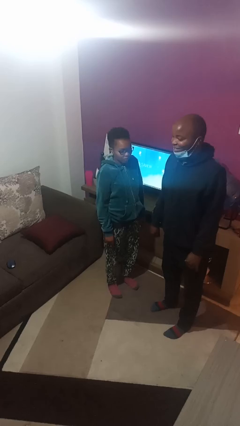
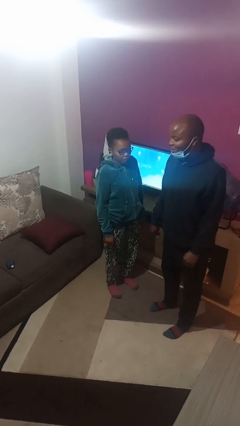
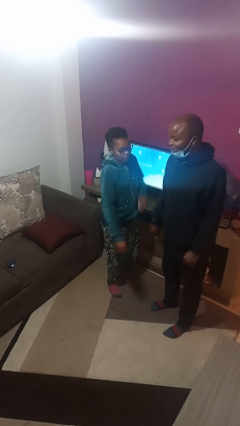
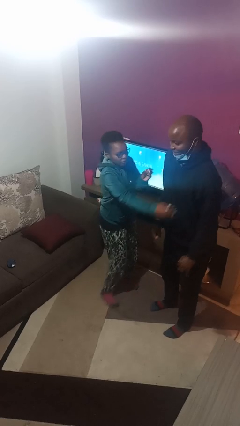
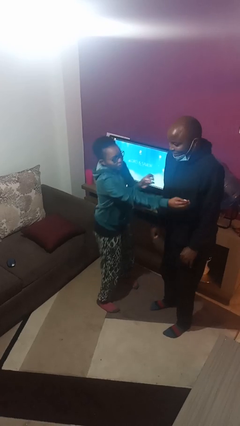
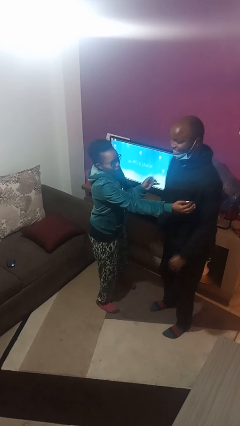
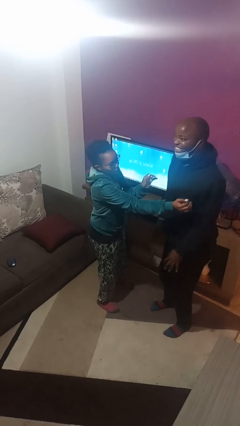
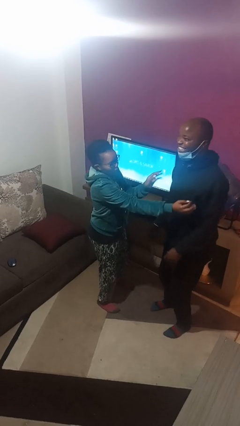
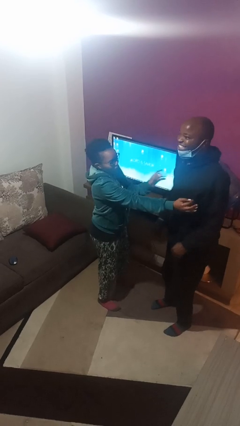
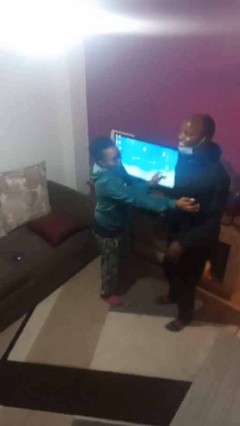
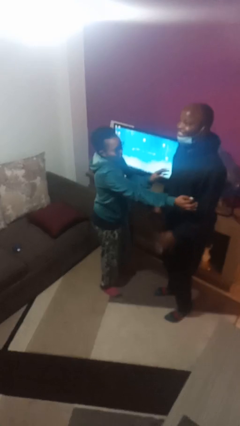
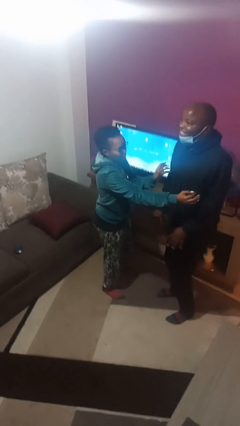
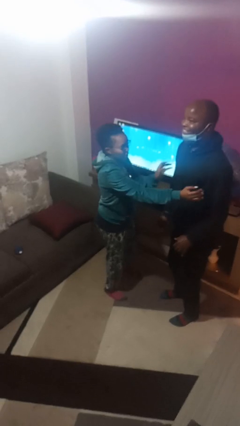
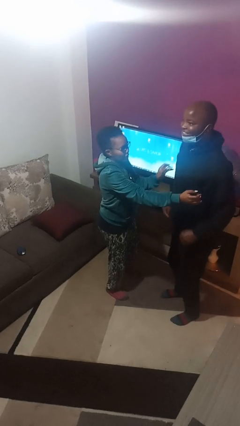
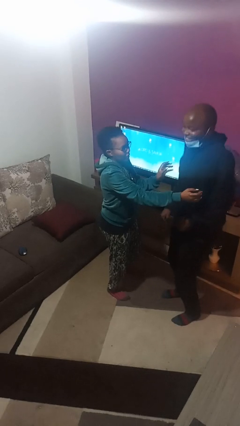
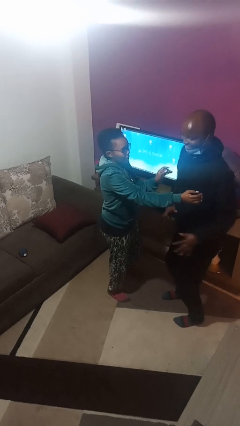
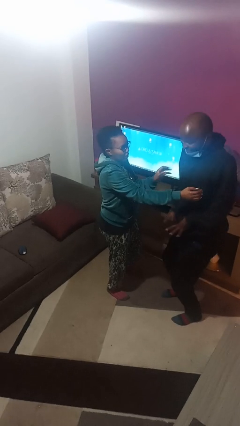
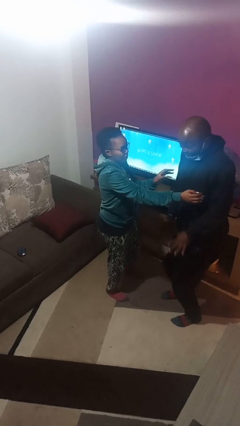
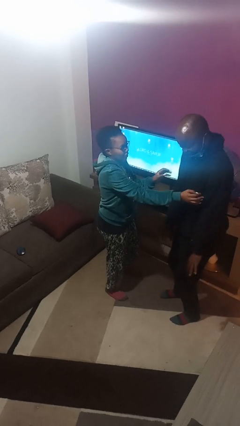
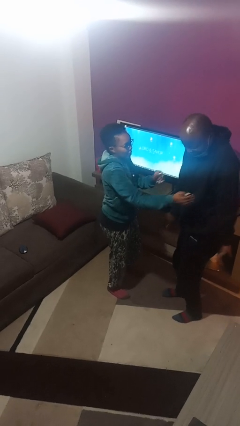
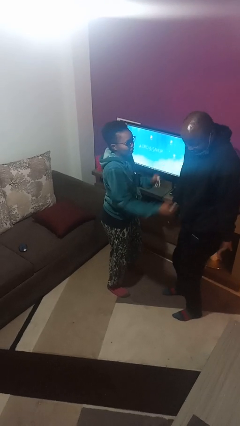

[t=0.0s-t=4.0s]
person tickles person

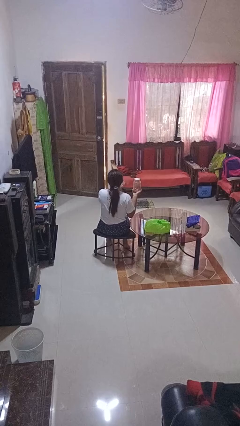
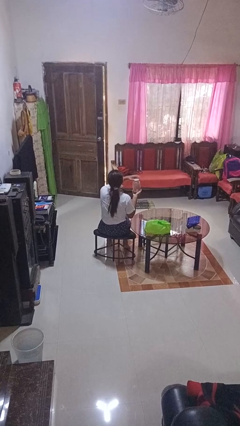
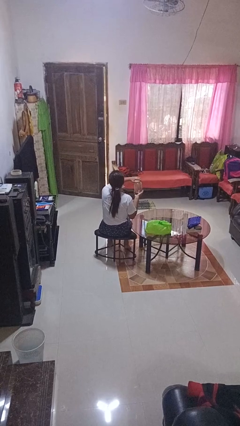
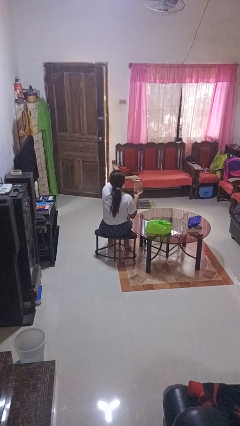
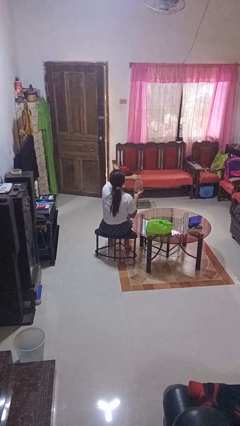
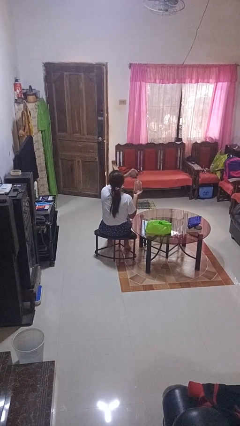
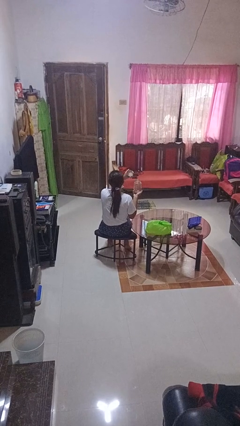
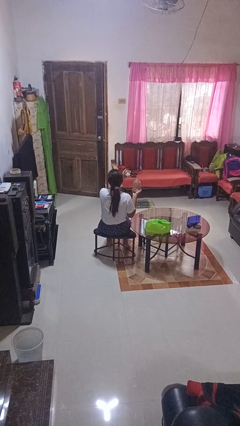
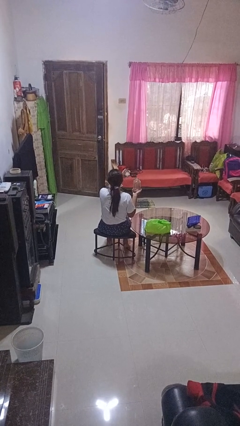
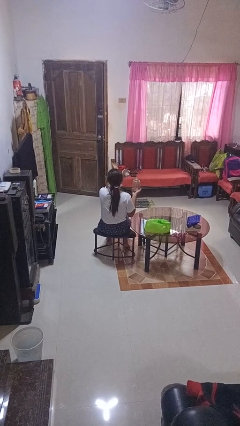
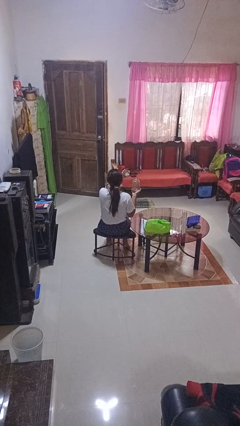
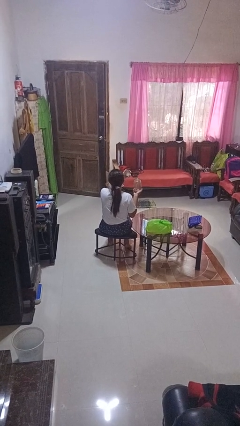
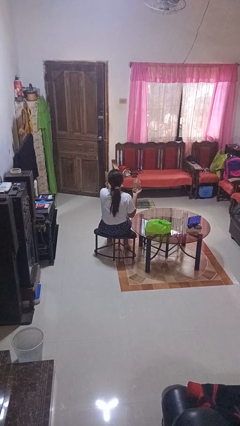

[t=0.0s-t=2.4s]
person opens jar

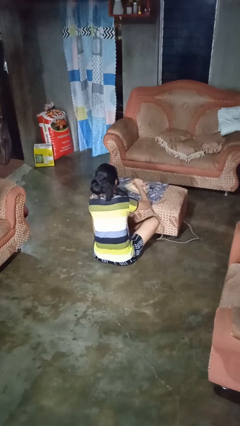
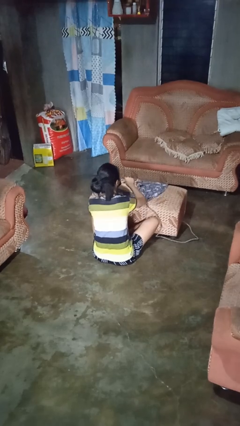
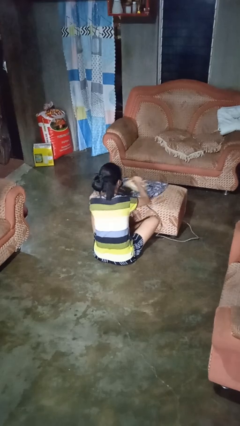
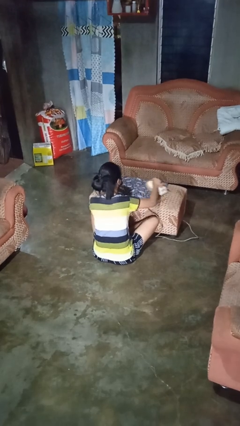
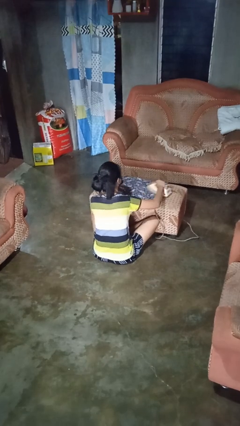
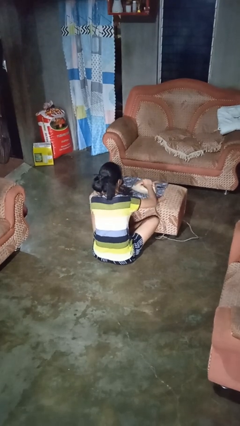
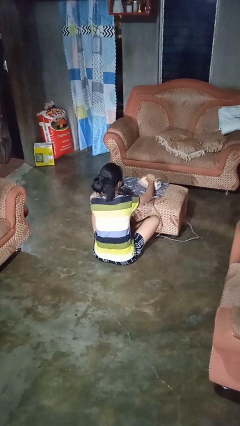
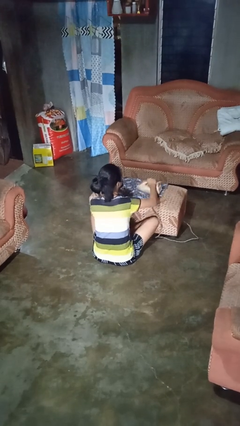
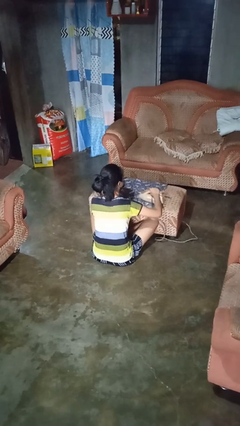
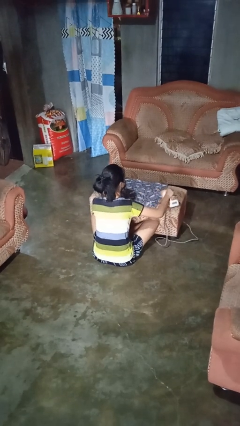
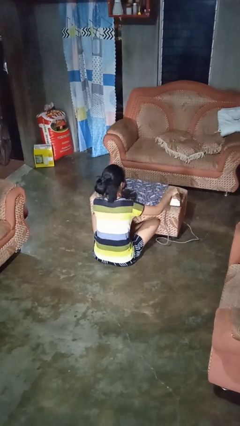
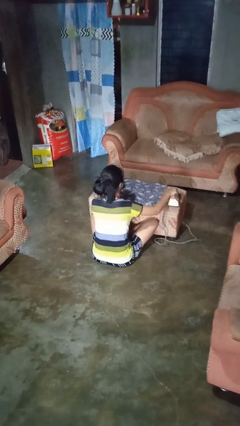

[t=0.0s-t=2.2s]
person irons clothes

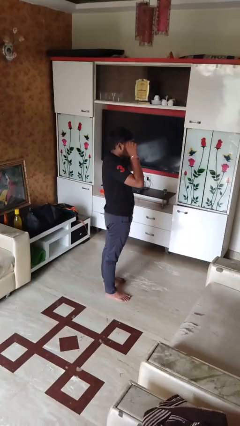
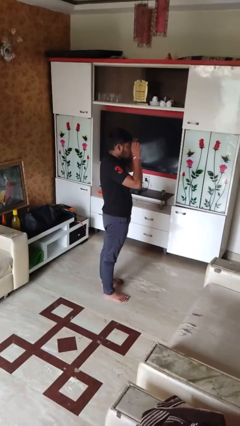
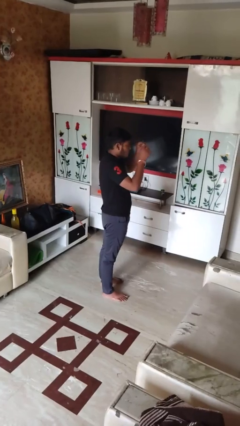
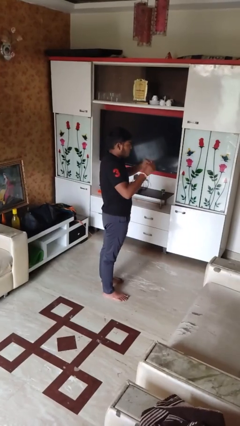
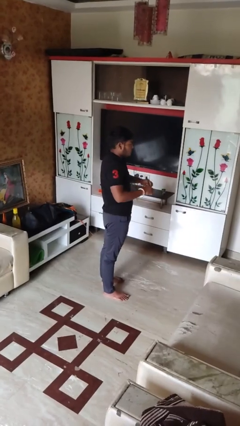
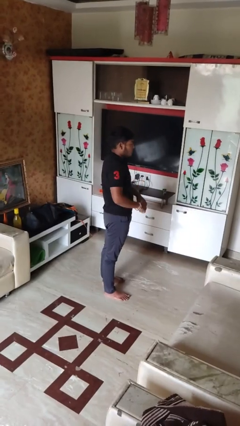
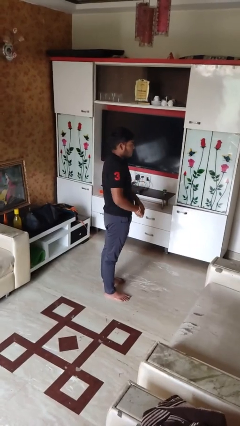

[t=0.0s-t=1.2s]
person takes off sunglasses

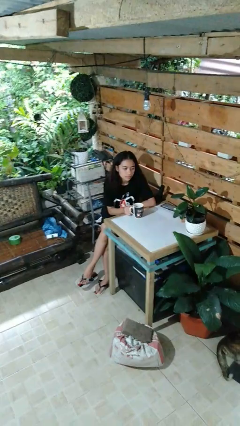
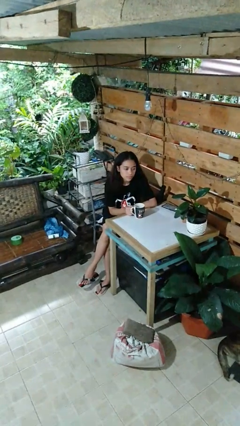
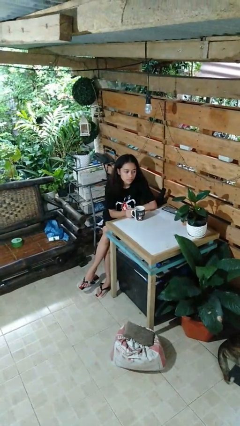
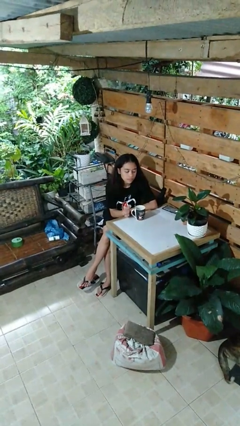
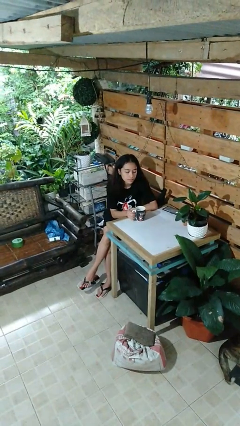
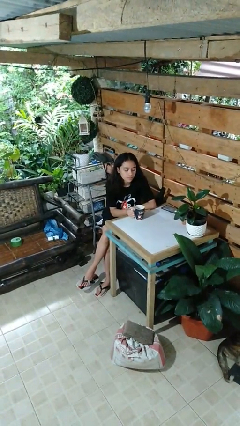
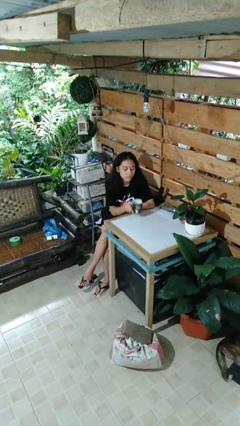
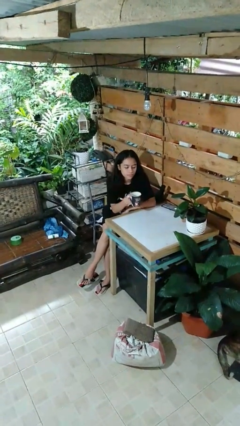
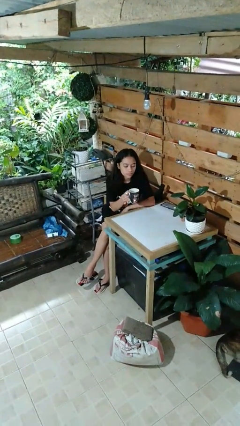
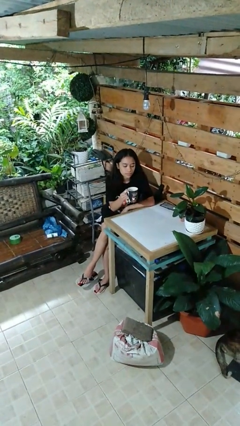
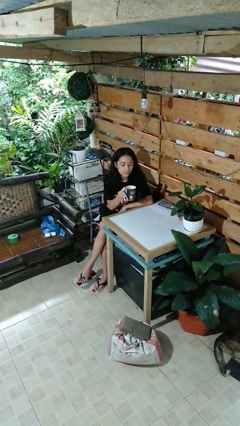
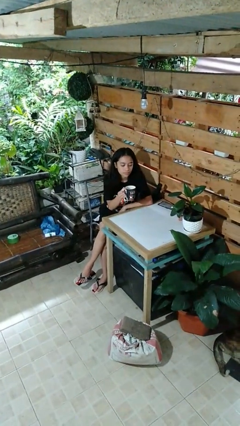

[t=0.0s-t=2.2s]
person picks up object from table

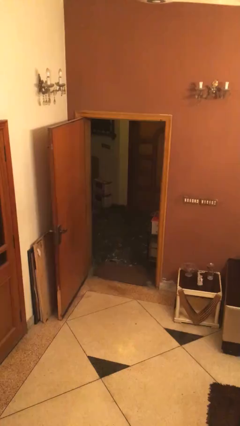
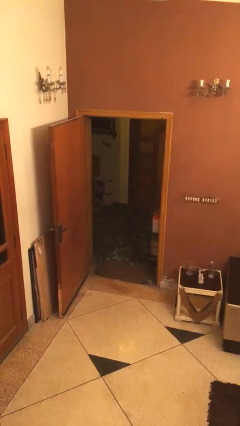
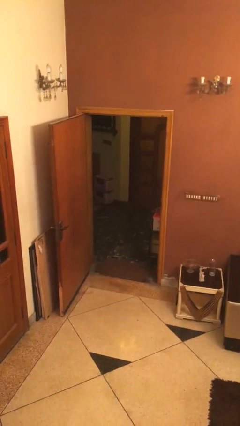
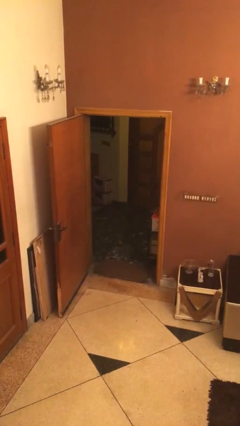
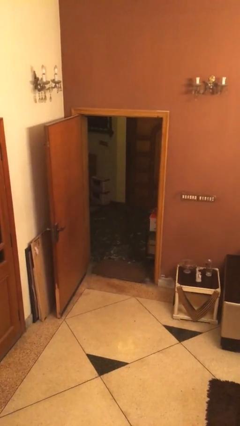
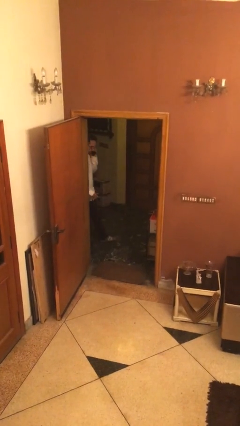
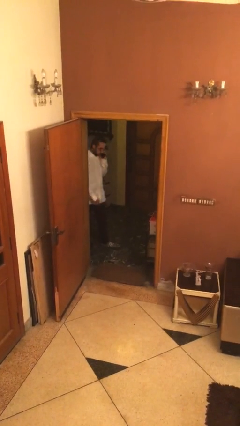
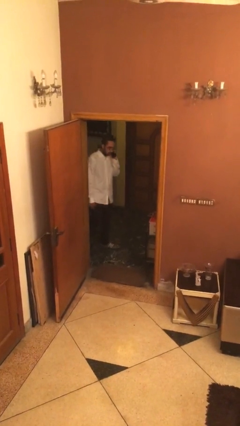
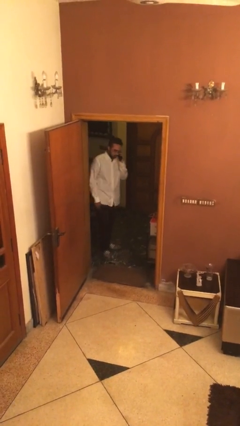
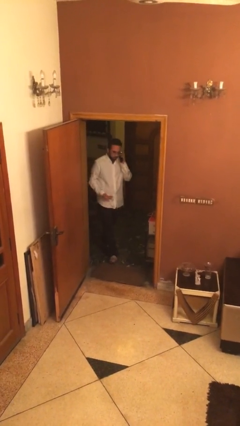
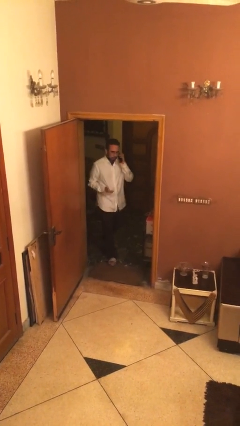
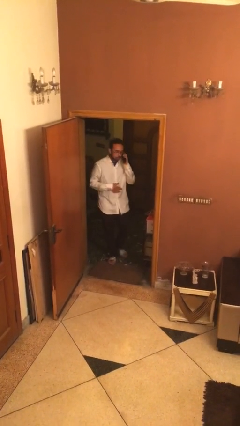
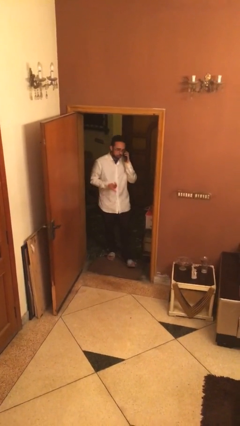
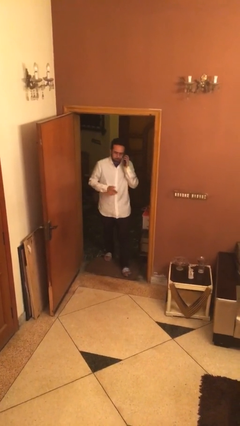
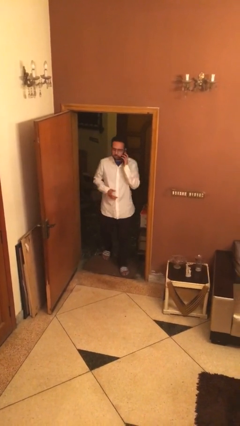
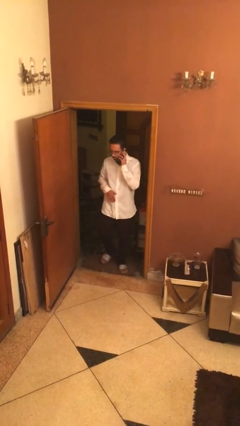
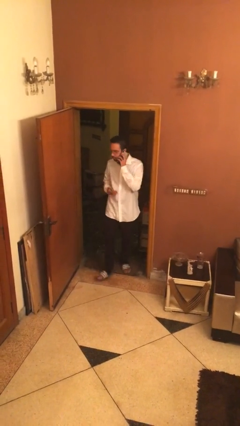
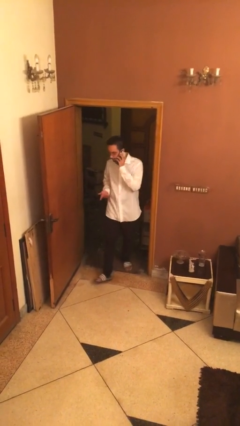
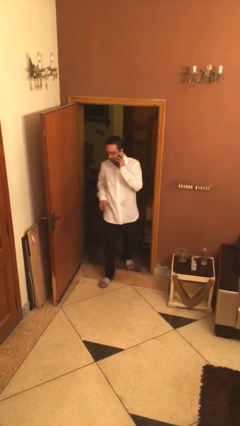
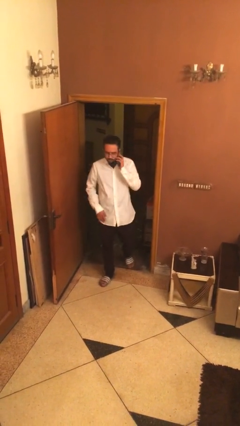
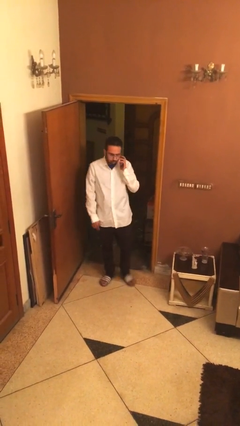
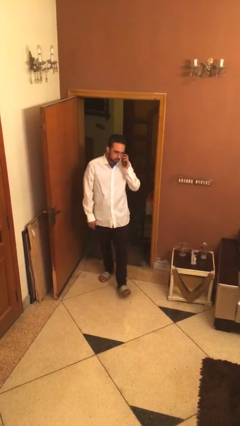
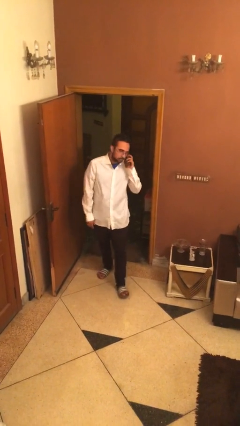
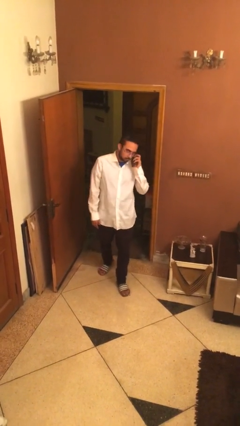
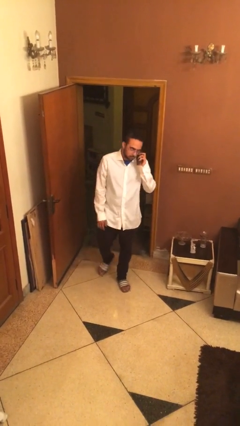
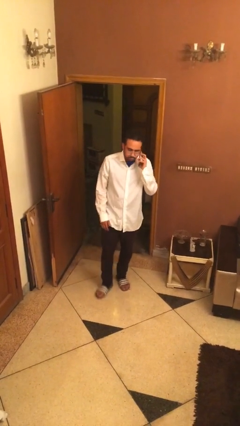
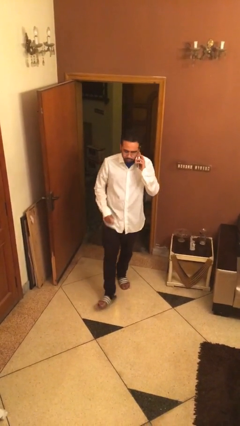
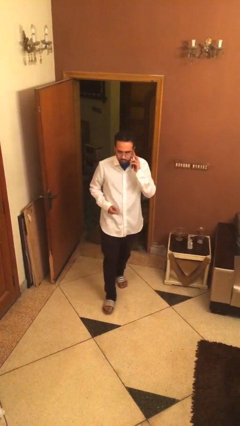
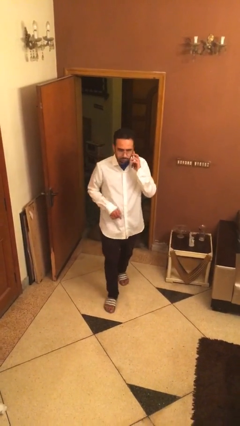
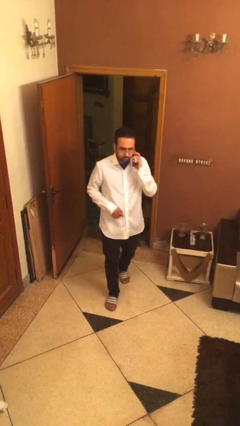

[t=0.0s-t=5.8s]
person enters scene through structure
